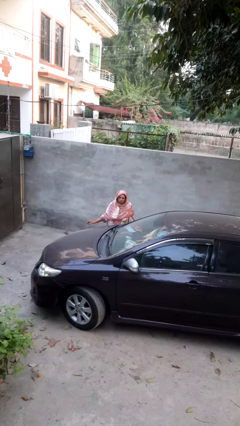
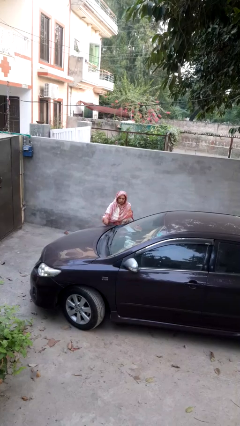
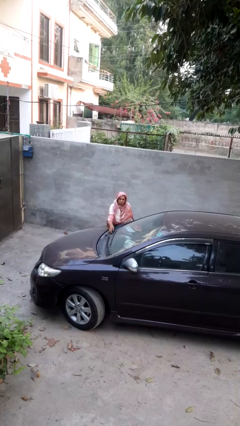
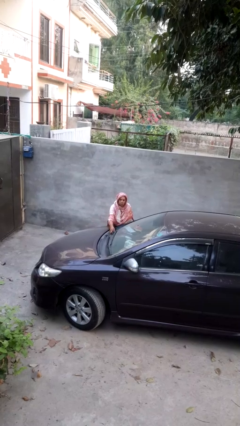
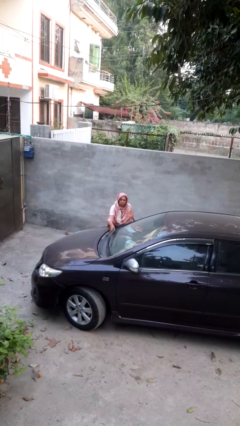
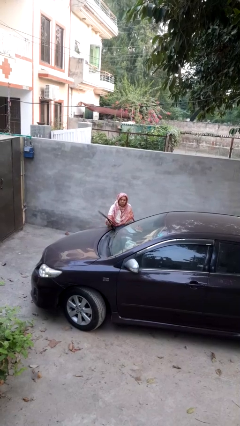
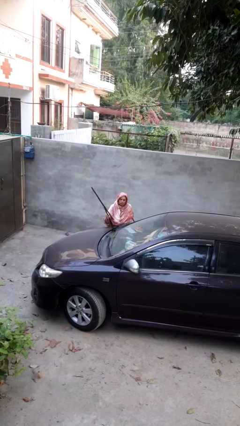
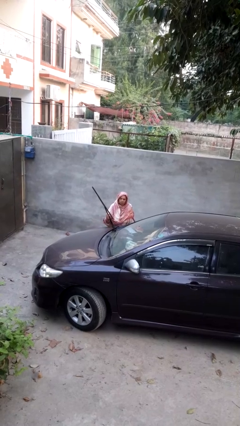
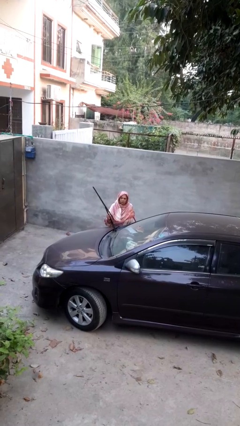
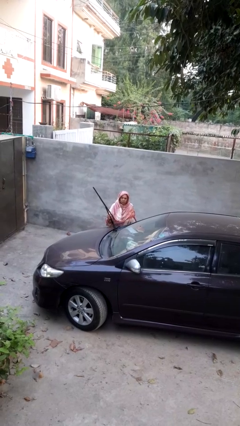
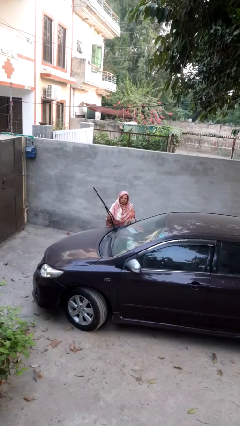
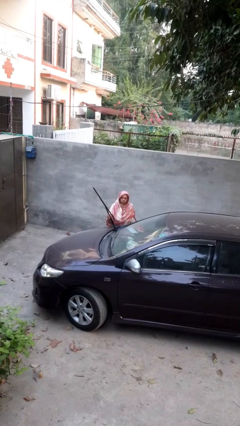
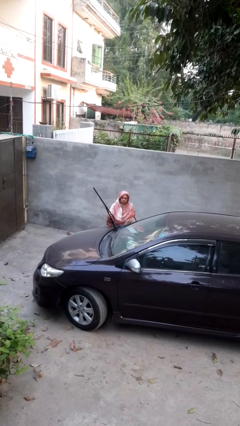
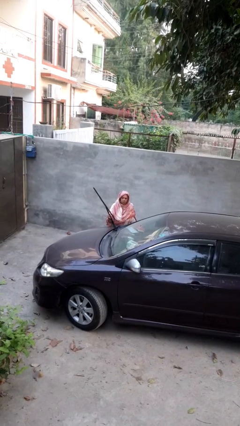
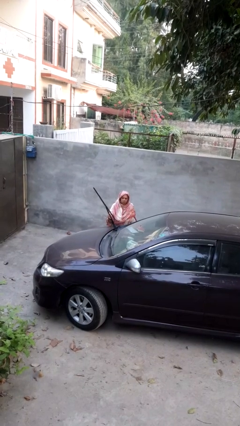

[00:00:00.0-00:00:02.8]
person flips up car wipers

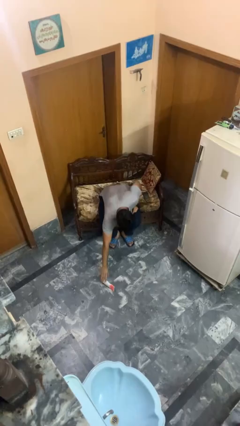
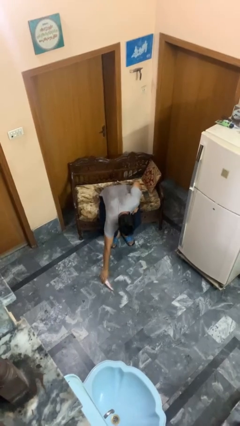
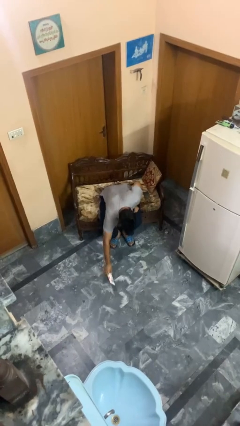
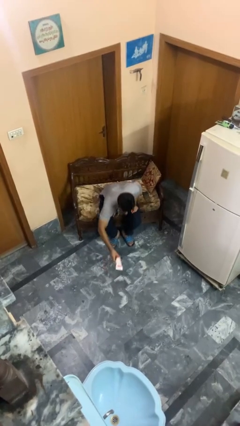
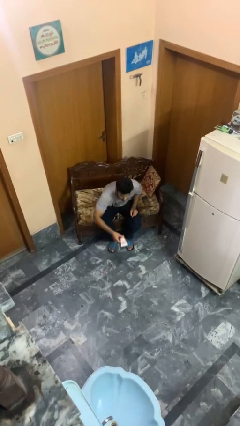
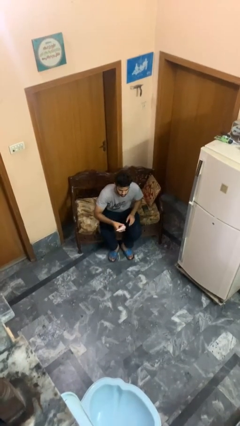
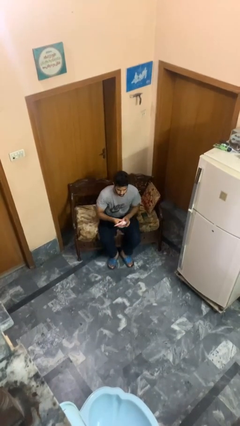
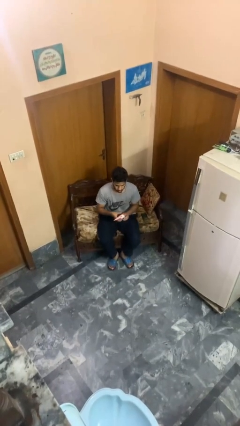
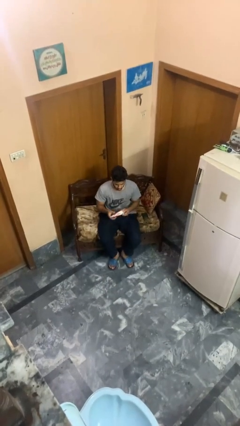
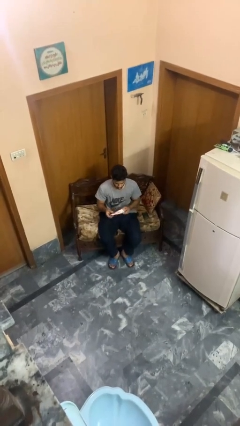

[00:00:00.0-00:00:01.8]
person picks up object from floor

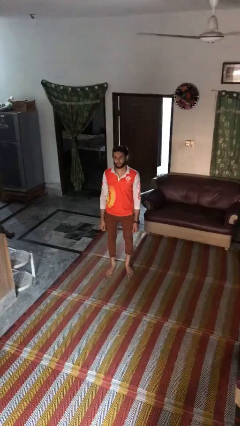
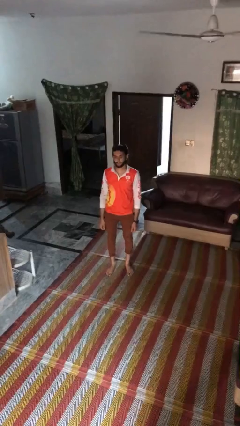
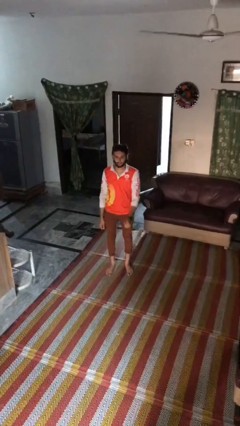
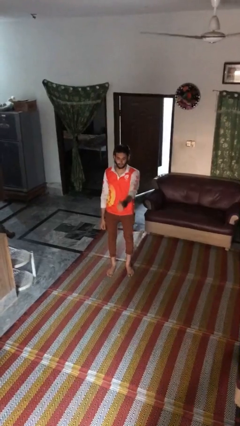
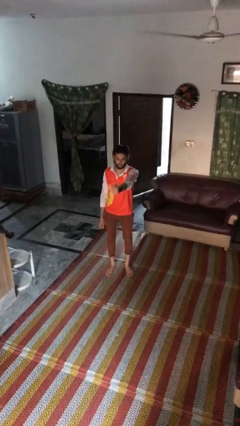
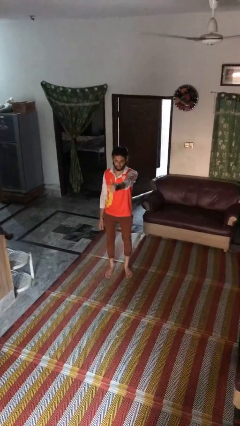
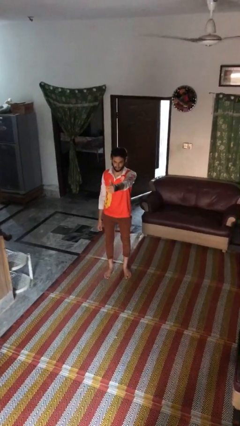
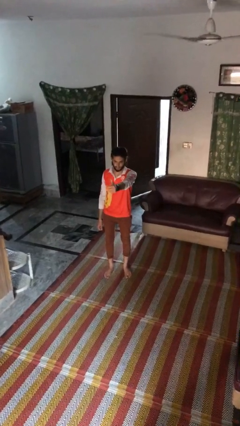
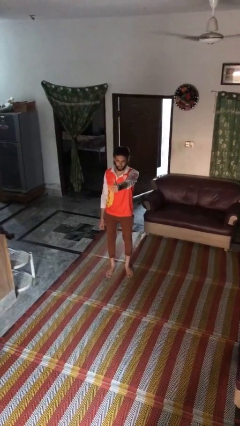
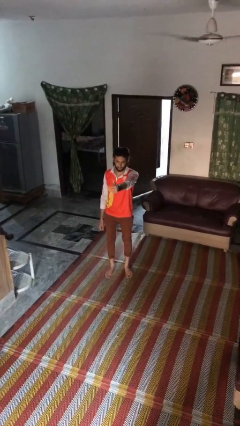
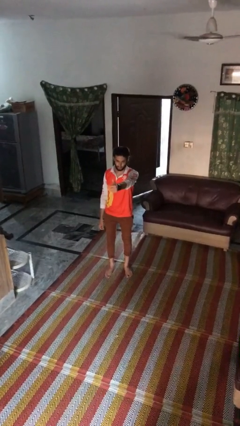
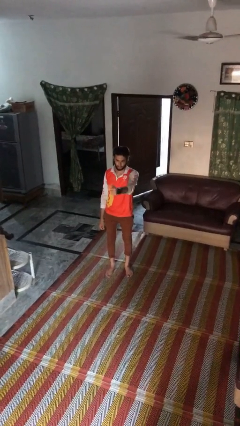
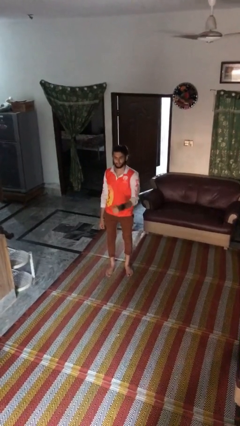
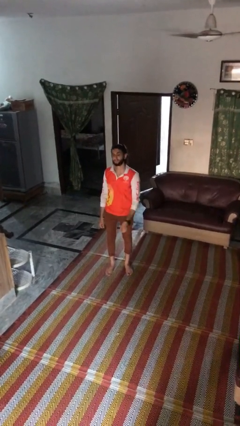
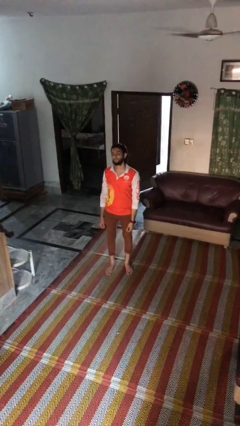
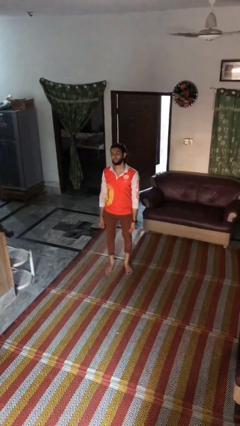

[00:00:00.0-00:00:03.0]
person gestures thumbs up

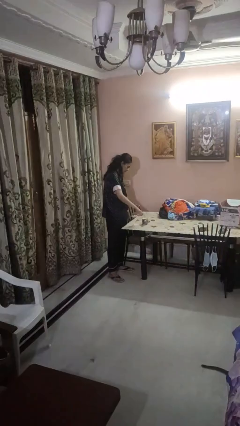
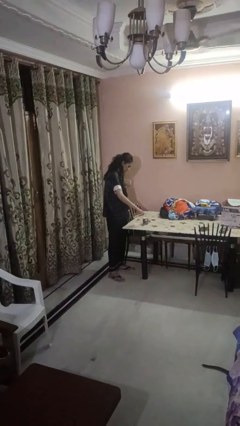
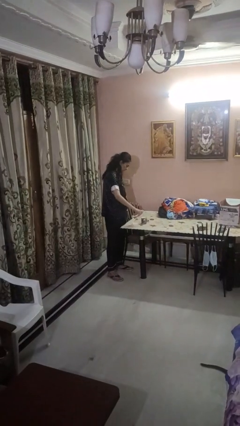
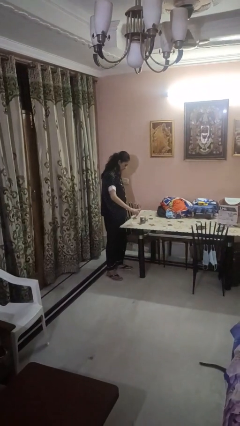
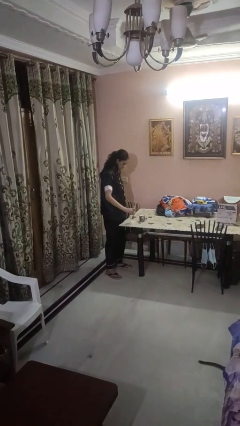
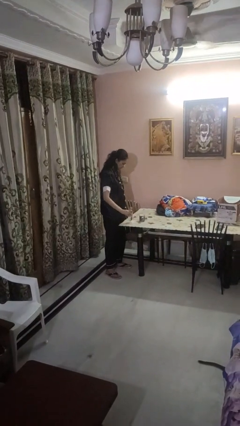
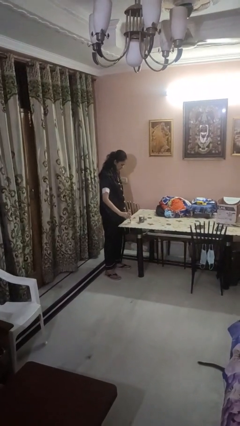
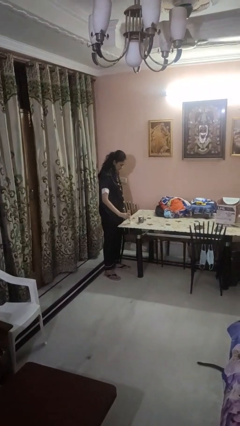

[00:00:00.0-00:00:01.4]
person pours liquid into cup

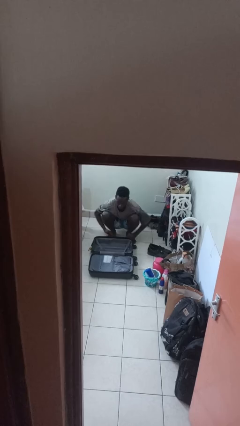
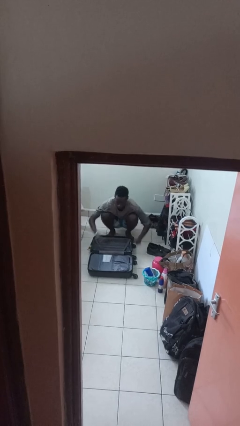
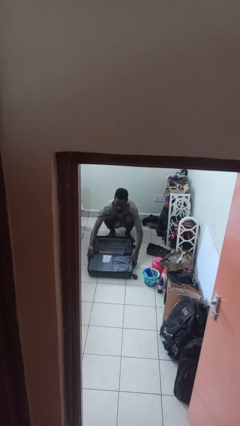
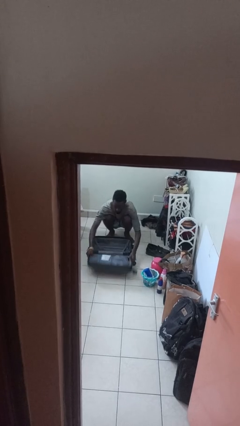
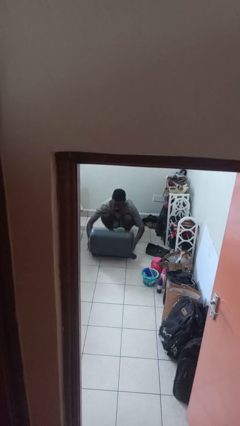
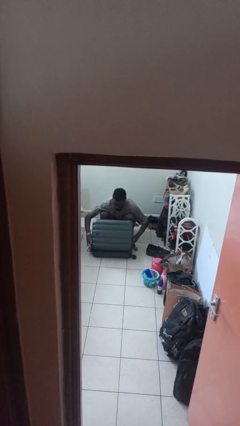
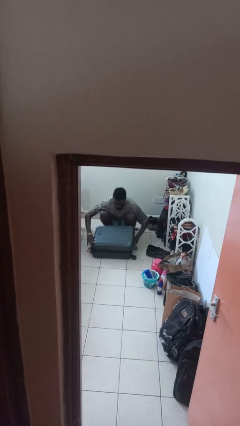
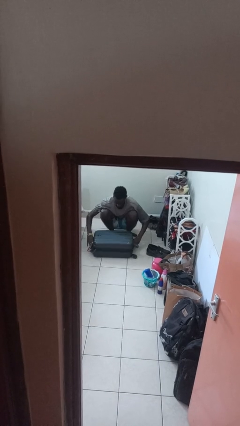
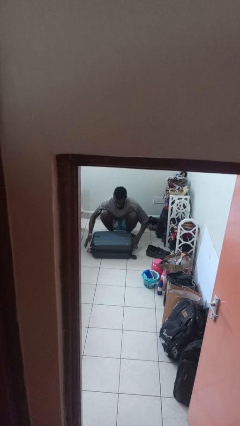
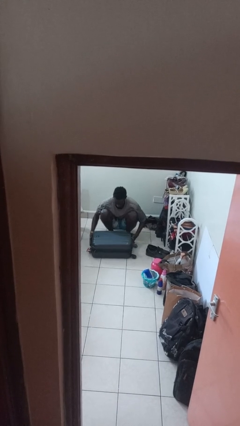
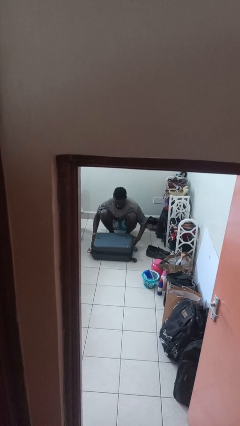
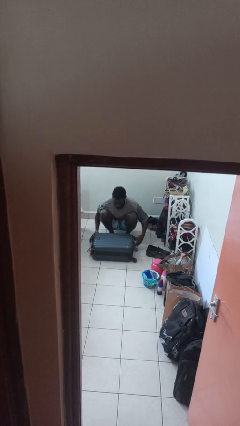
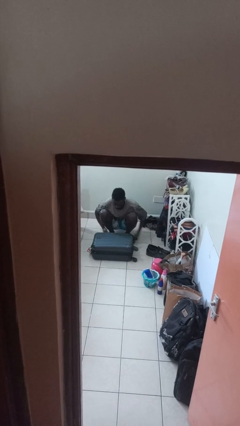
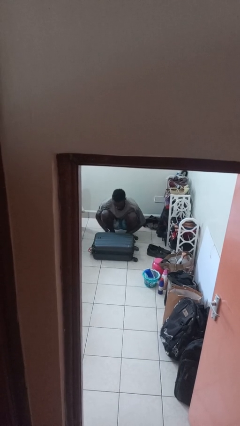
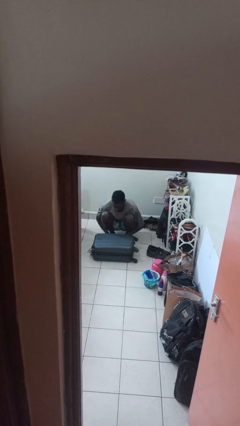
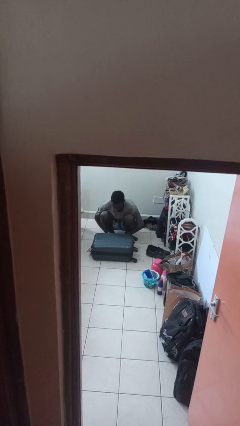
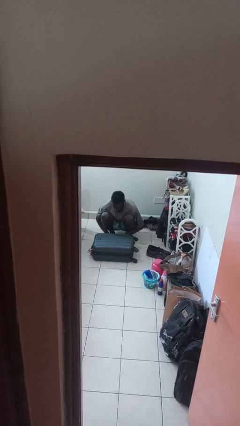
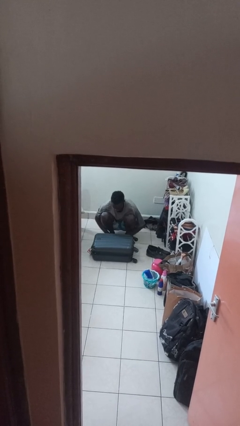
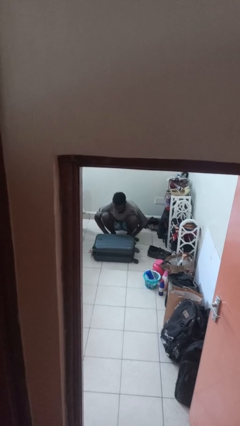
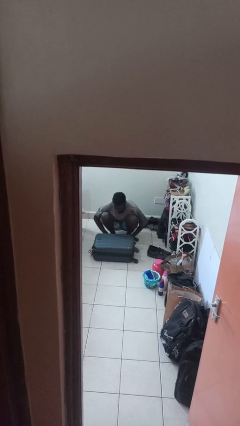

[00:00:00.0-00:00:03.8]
person closes suitcase

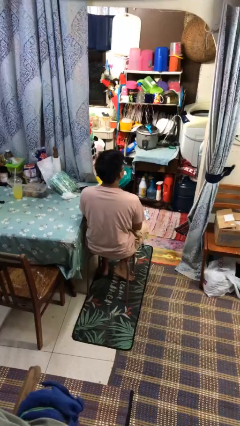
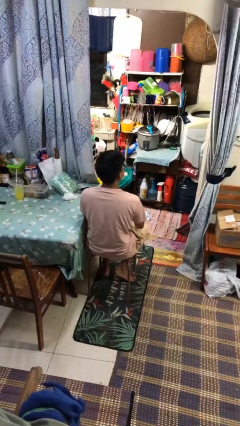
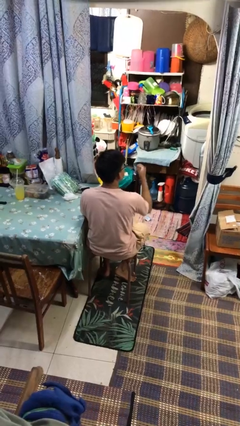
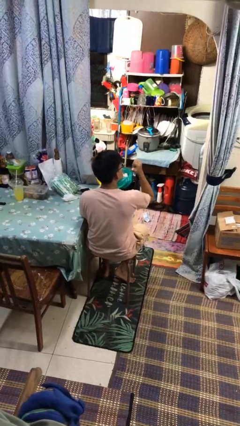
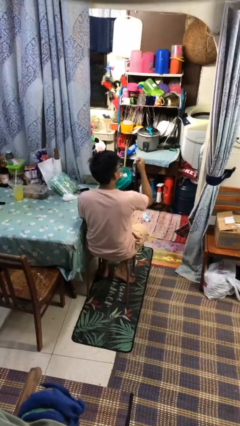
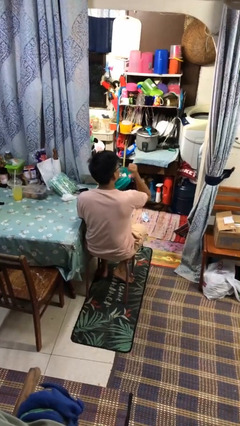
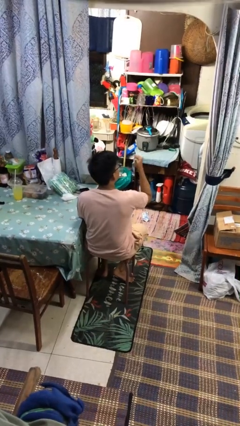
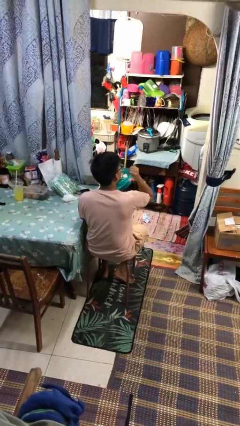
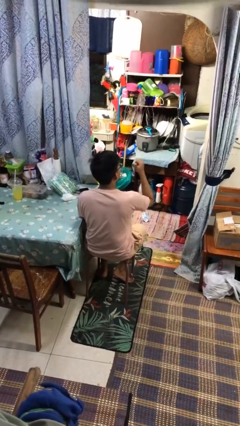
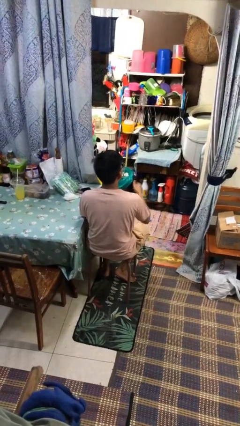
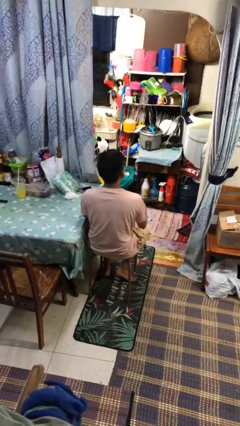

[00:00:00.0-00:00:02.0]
person gestures behind me

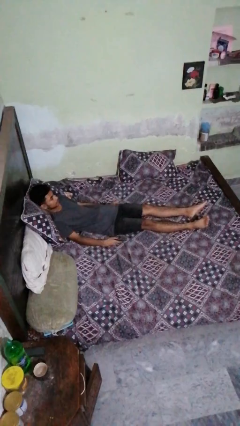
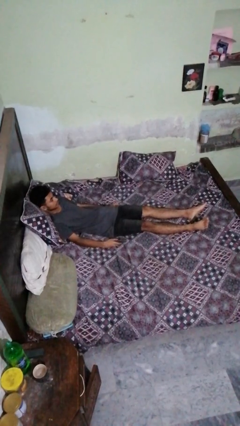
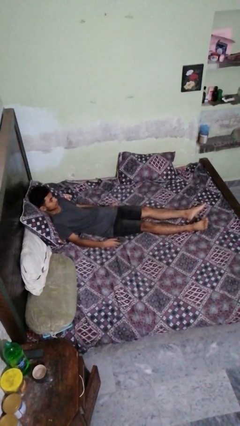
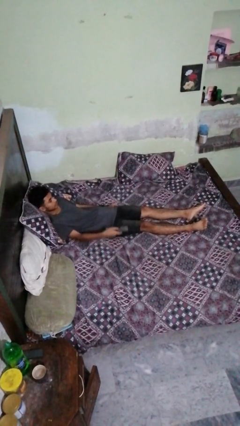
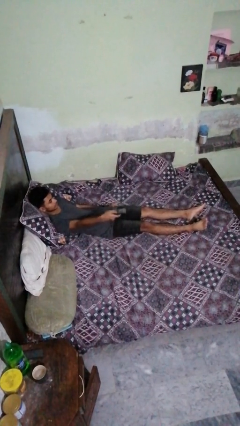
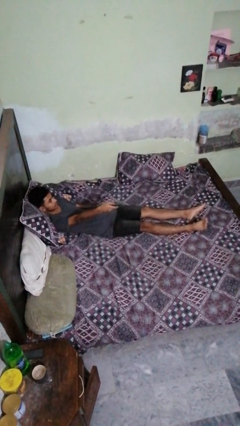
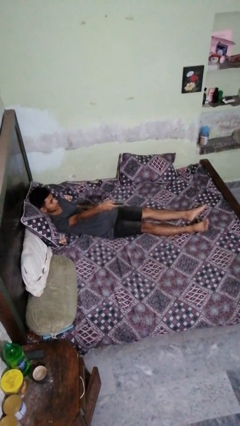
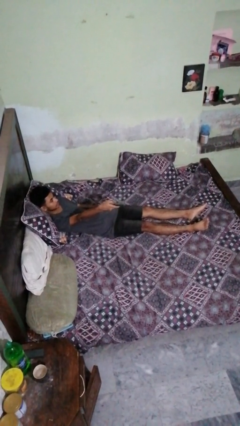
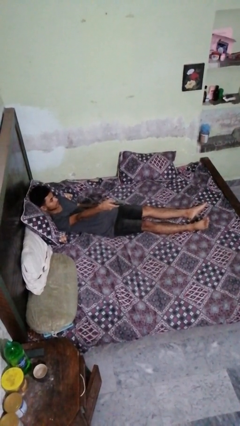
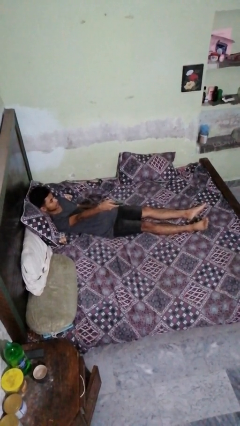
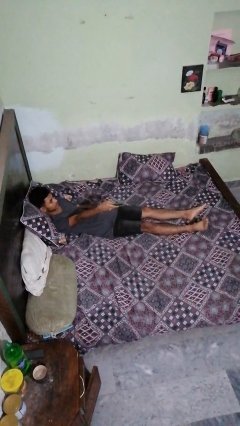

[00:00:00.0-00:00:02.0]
person uses television remote
